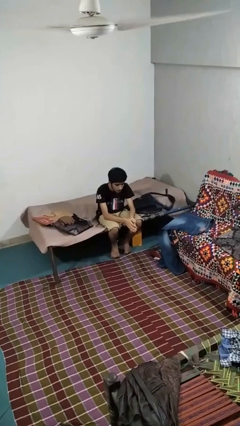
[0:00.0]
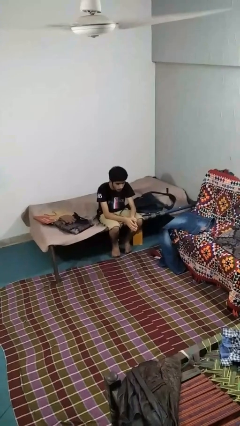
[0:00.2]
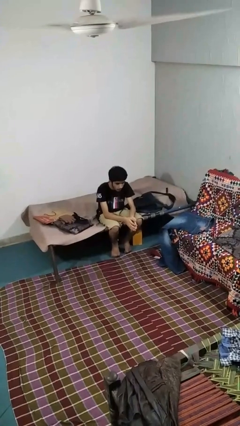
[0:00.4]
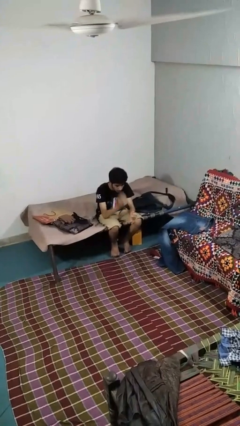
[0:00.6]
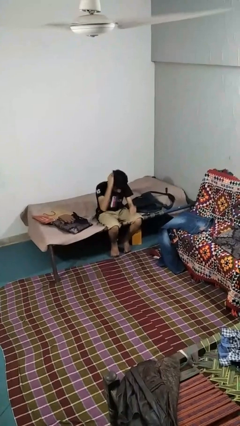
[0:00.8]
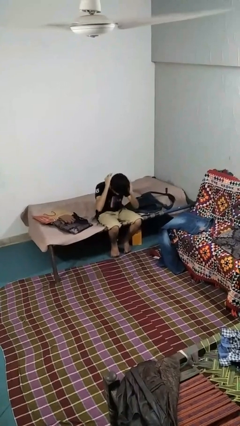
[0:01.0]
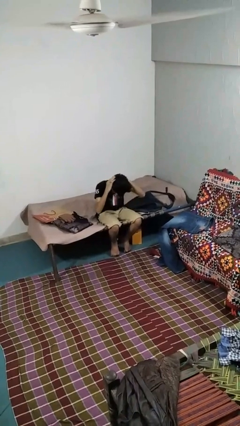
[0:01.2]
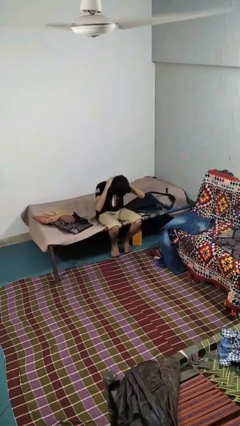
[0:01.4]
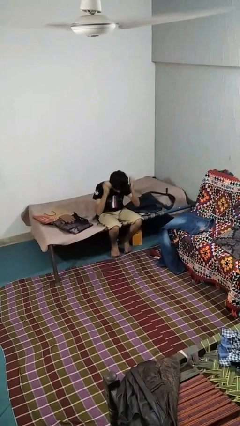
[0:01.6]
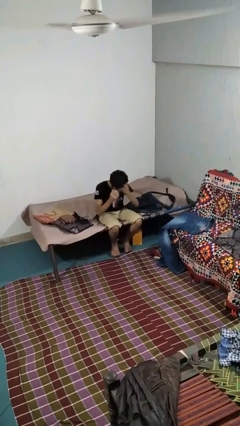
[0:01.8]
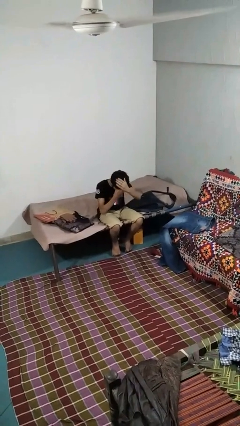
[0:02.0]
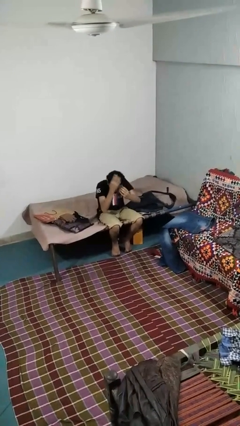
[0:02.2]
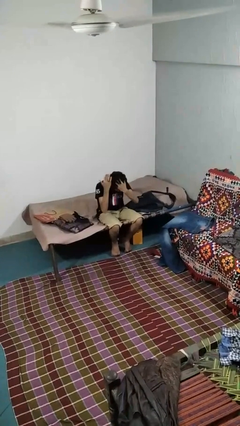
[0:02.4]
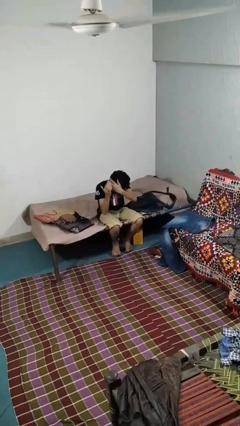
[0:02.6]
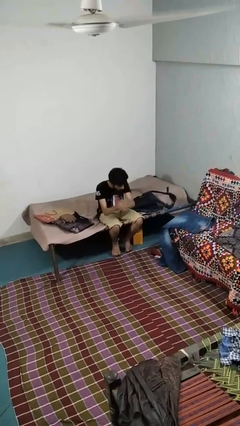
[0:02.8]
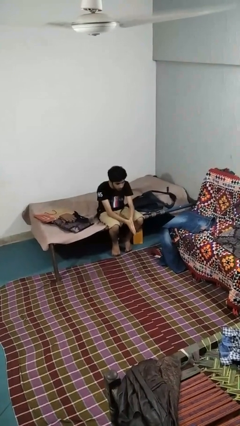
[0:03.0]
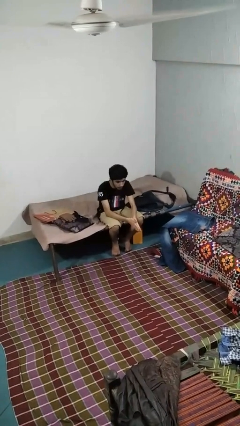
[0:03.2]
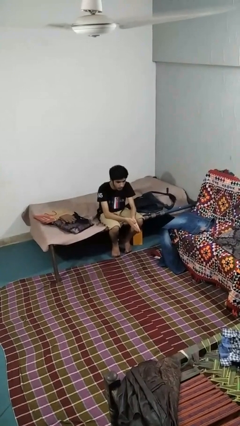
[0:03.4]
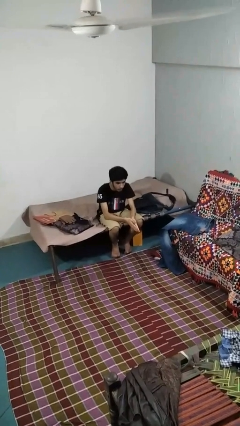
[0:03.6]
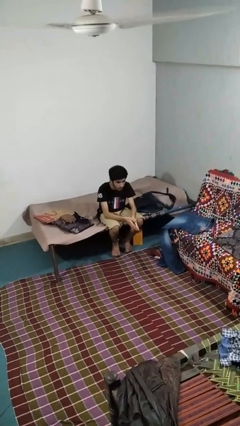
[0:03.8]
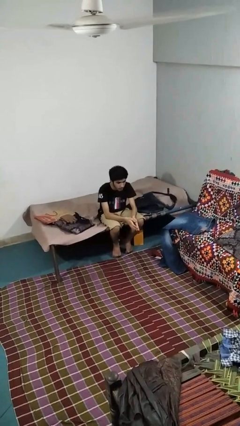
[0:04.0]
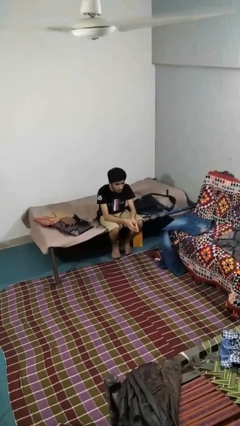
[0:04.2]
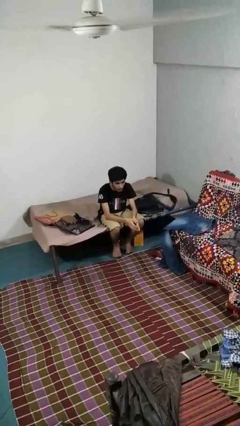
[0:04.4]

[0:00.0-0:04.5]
person strokes hair

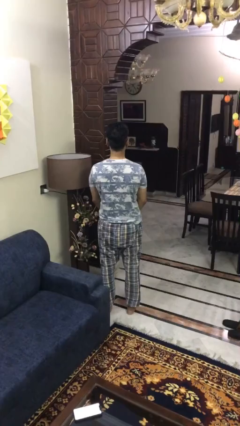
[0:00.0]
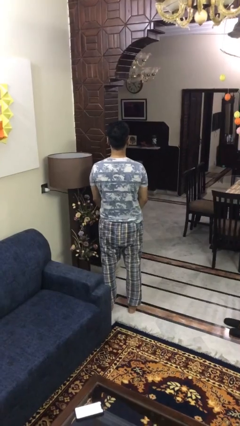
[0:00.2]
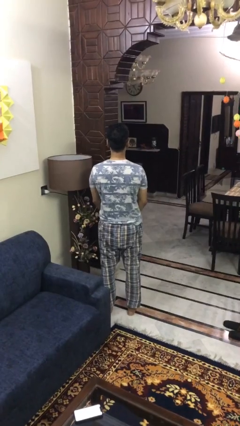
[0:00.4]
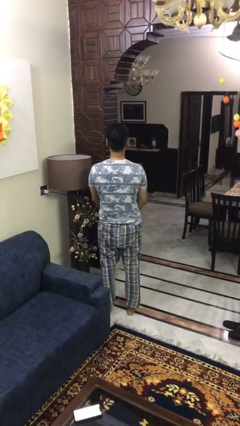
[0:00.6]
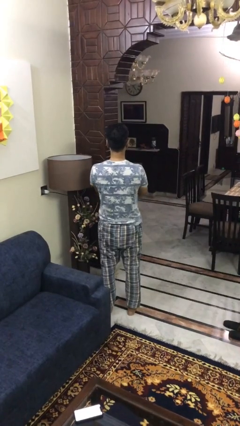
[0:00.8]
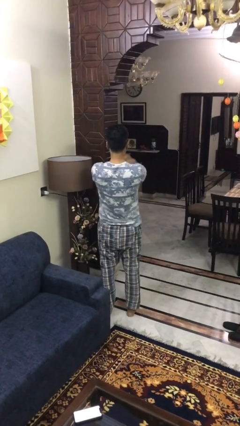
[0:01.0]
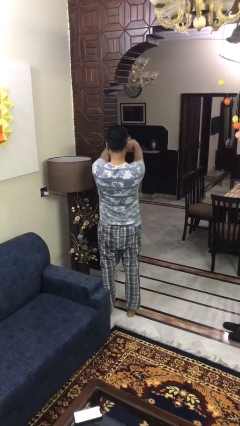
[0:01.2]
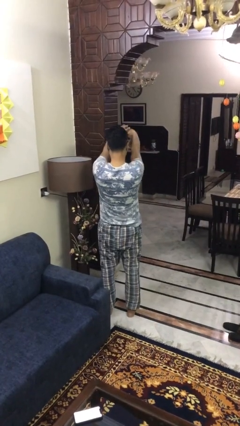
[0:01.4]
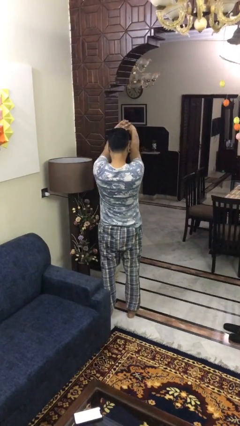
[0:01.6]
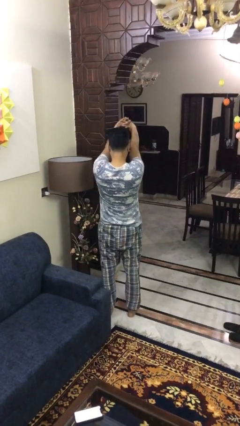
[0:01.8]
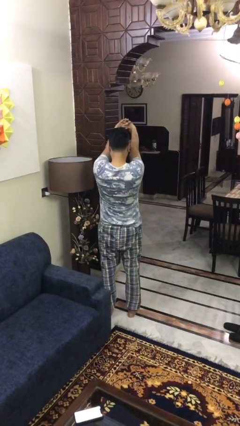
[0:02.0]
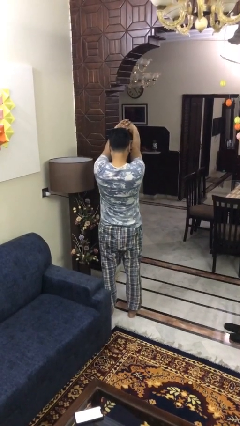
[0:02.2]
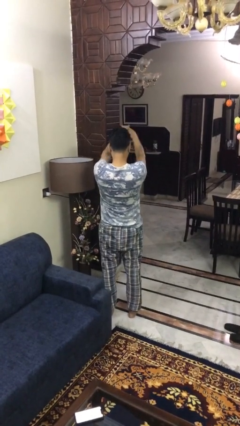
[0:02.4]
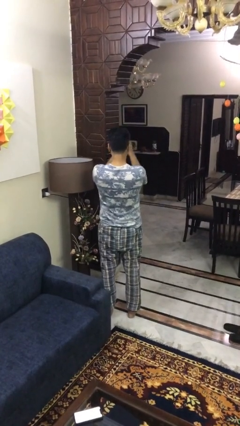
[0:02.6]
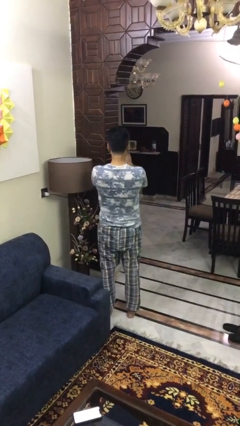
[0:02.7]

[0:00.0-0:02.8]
person cracks knuckles

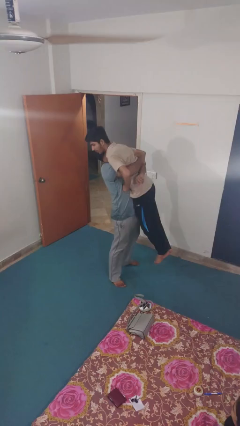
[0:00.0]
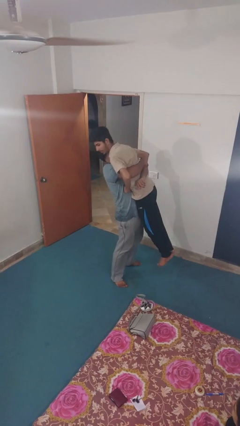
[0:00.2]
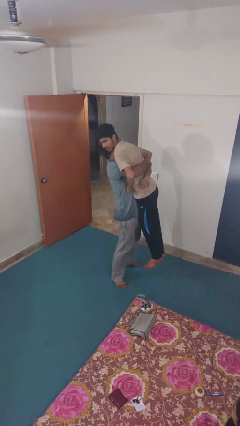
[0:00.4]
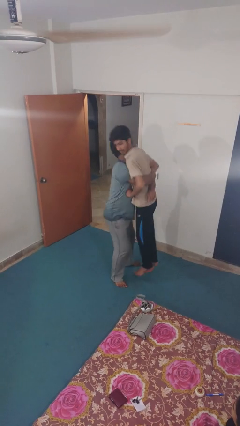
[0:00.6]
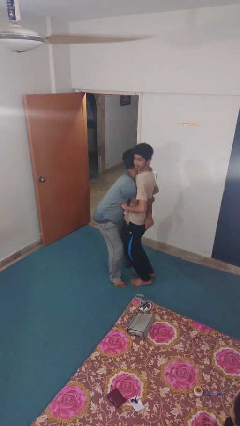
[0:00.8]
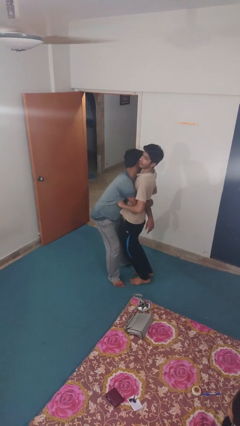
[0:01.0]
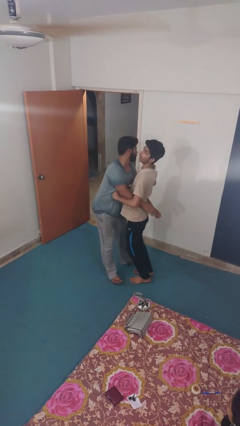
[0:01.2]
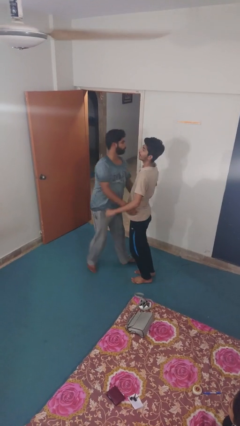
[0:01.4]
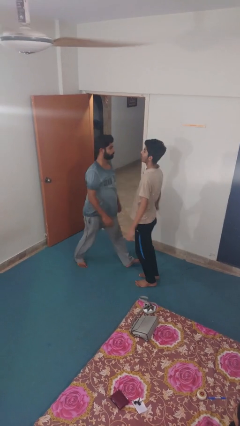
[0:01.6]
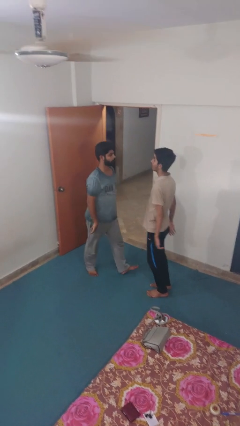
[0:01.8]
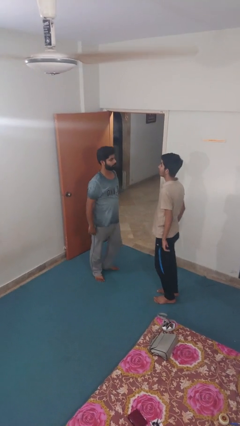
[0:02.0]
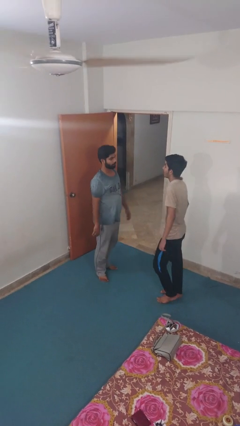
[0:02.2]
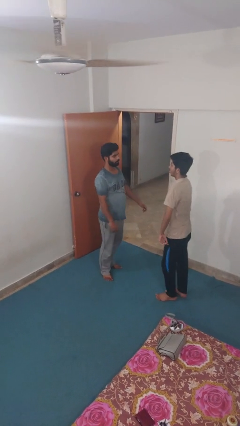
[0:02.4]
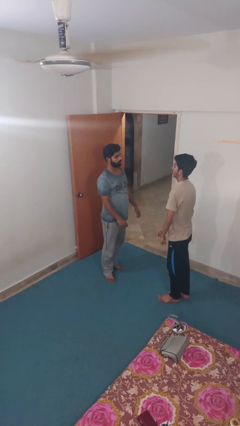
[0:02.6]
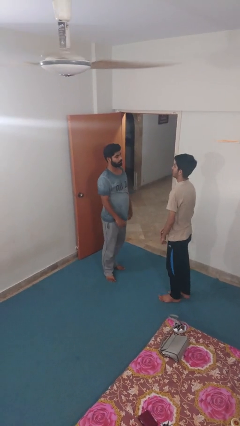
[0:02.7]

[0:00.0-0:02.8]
person puts down person

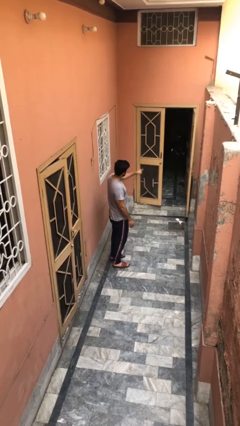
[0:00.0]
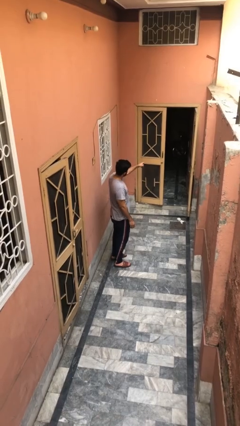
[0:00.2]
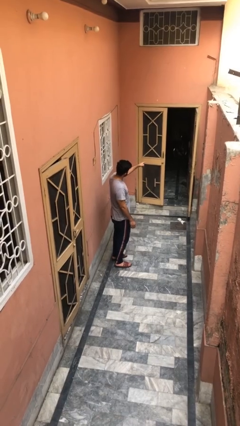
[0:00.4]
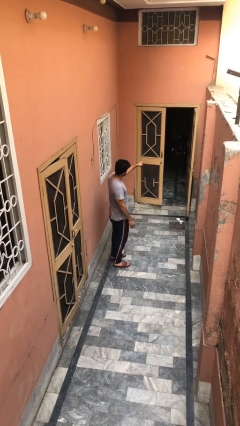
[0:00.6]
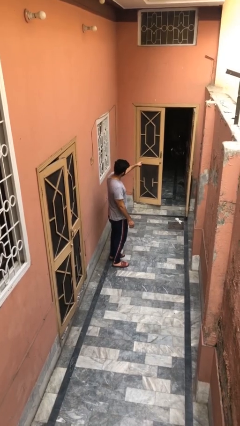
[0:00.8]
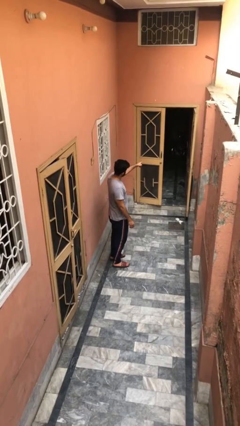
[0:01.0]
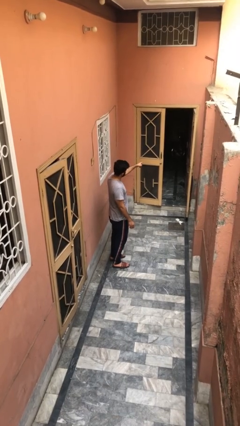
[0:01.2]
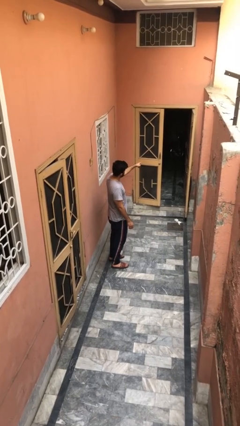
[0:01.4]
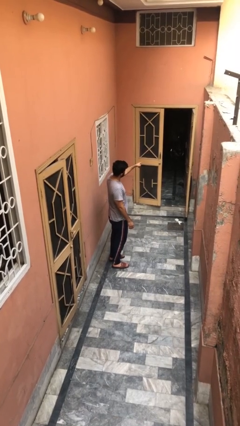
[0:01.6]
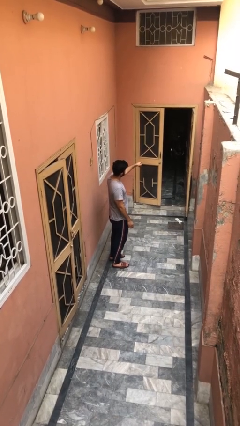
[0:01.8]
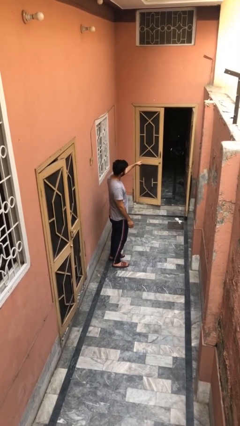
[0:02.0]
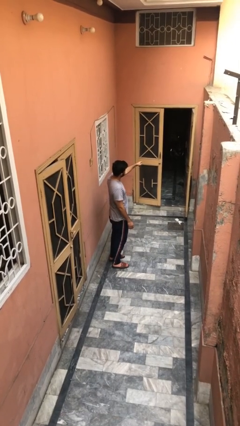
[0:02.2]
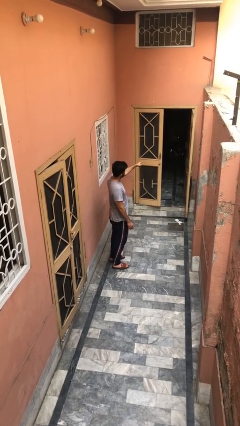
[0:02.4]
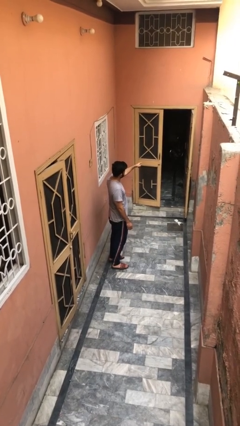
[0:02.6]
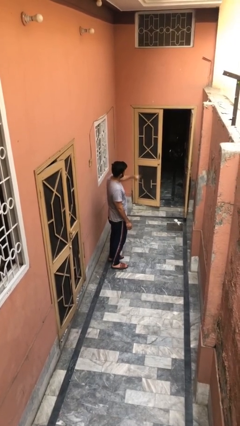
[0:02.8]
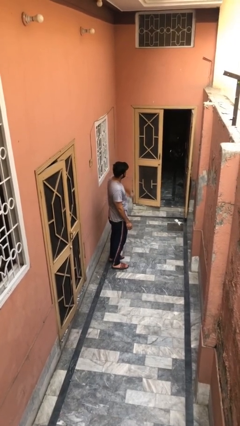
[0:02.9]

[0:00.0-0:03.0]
person points at person

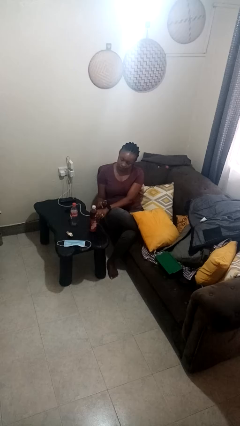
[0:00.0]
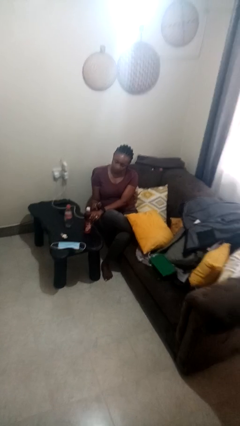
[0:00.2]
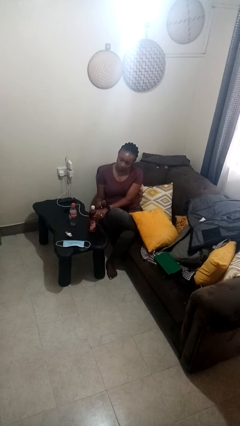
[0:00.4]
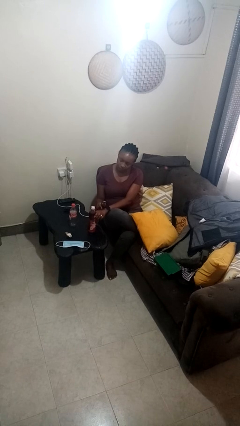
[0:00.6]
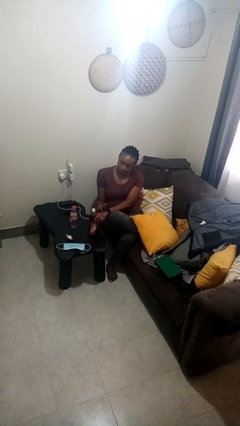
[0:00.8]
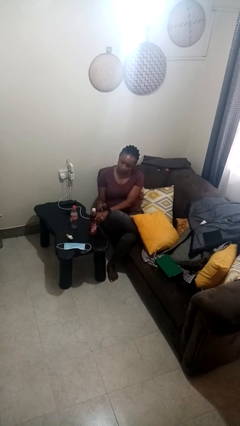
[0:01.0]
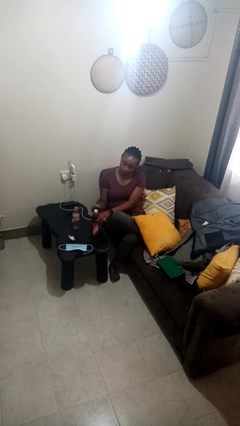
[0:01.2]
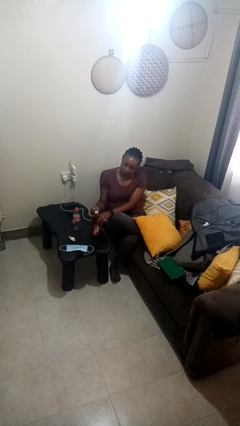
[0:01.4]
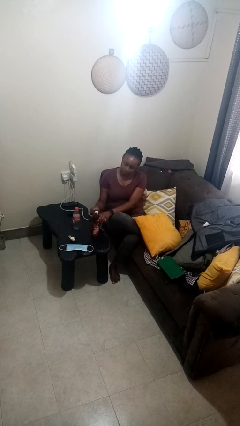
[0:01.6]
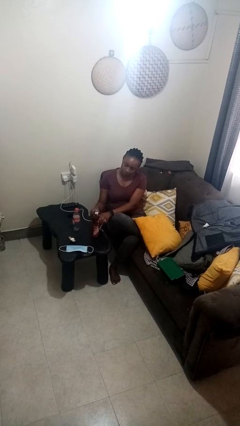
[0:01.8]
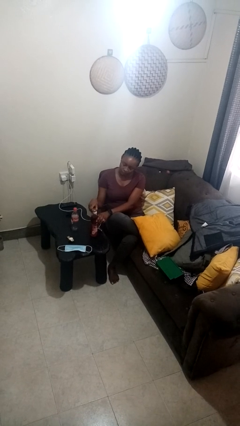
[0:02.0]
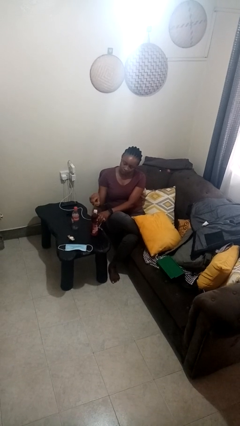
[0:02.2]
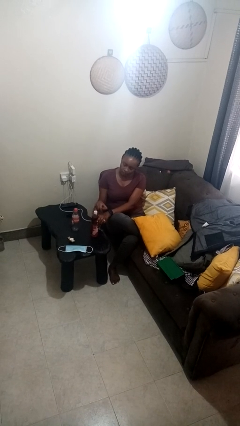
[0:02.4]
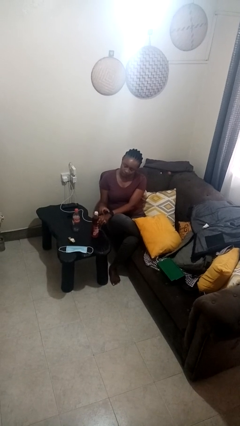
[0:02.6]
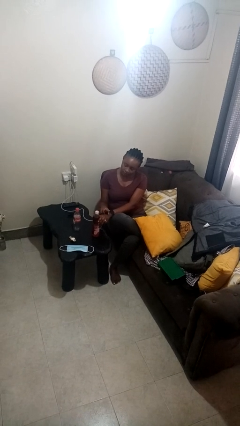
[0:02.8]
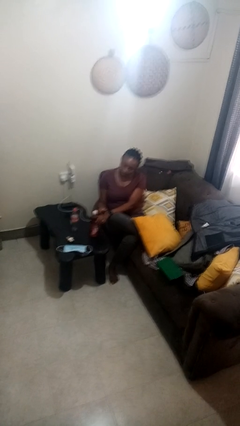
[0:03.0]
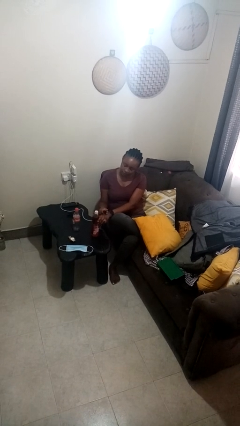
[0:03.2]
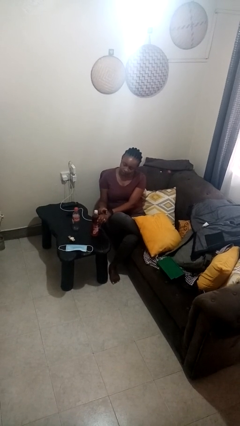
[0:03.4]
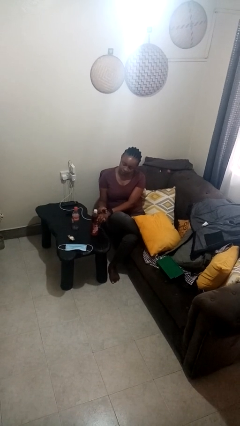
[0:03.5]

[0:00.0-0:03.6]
person opens can with can opener

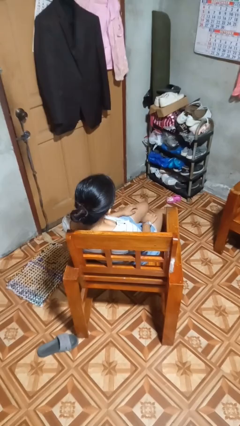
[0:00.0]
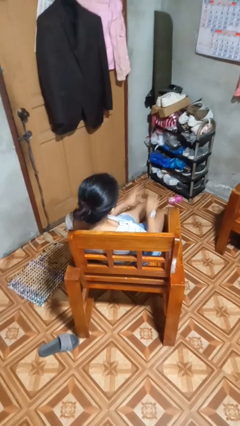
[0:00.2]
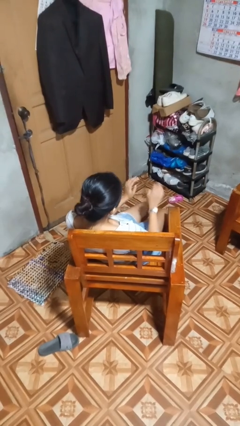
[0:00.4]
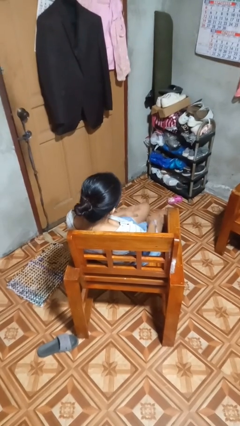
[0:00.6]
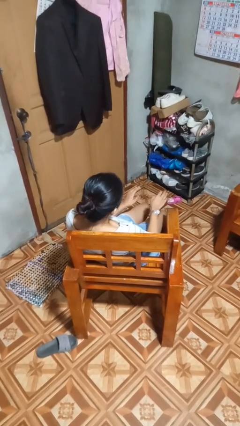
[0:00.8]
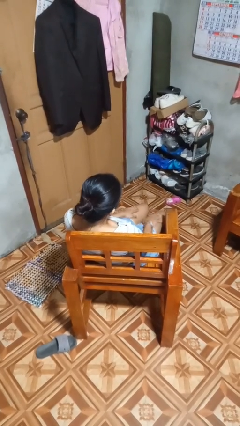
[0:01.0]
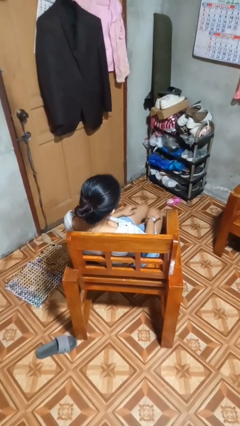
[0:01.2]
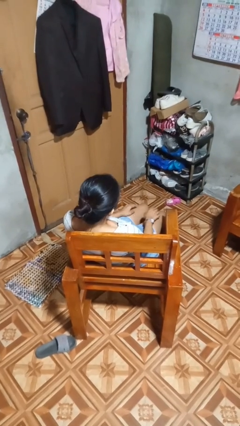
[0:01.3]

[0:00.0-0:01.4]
person slaps hands on thighs
